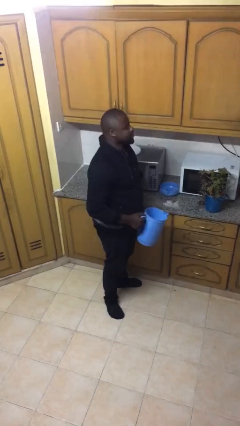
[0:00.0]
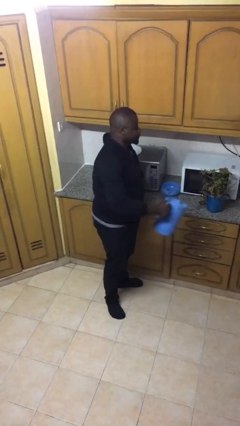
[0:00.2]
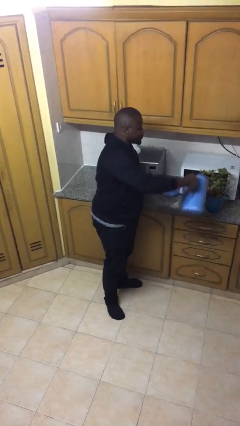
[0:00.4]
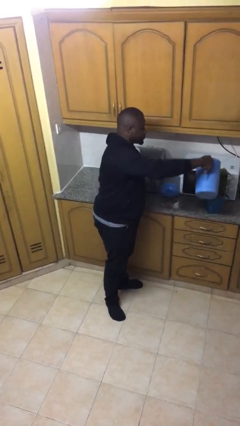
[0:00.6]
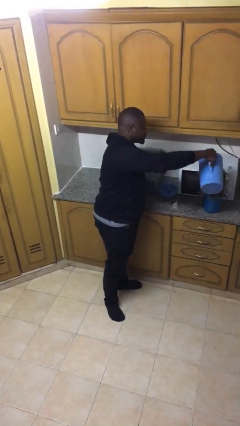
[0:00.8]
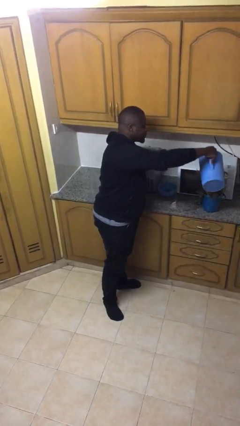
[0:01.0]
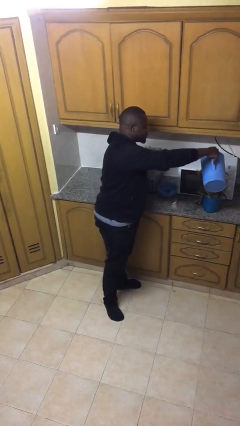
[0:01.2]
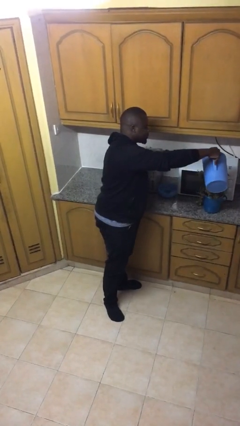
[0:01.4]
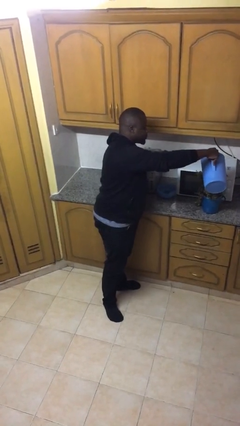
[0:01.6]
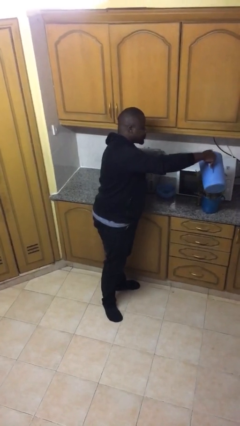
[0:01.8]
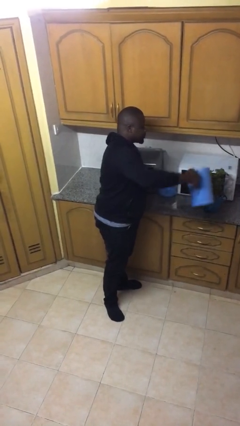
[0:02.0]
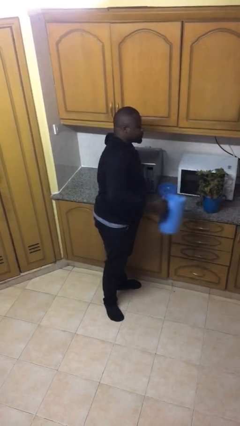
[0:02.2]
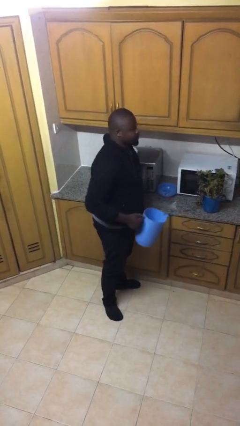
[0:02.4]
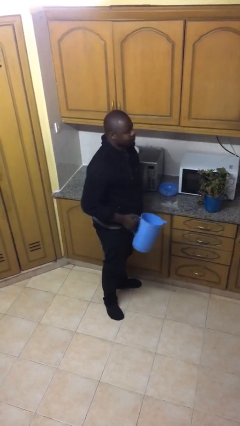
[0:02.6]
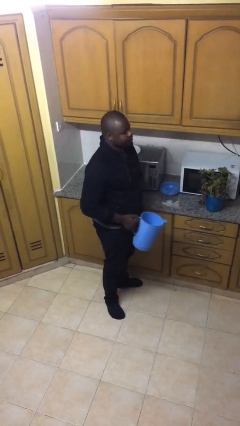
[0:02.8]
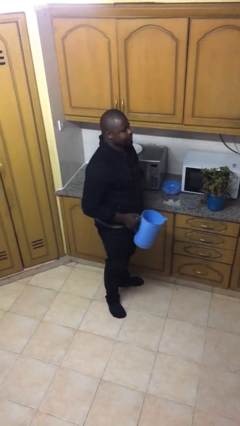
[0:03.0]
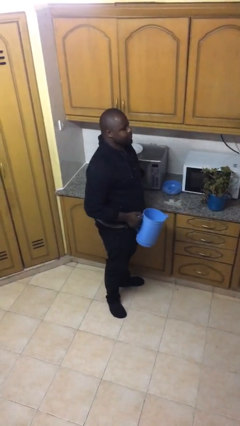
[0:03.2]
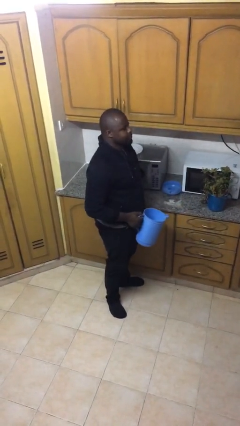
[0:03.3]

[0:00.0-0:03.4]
person waters houseplant

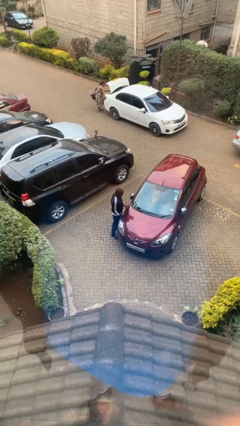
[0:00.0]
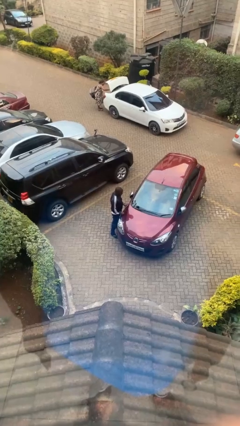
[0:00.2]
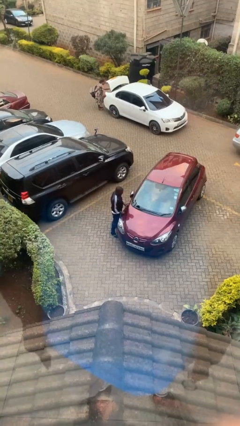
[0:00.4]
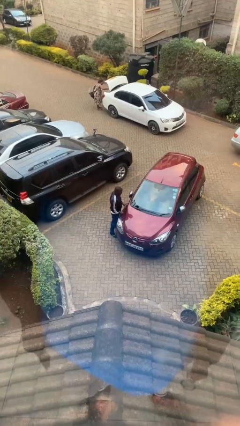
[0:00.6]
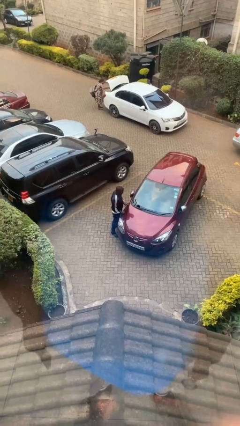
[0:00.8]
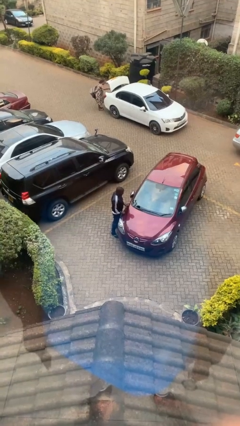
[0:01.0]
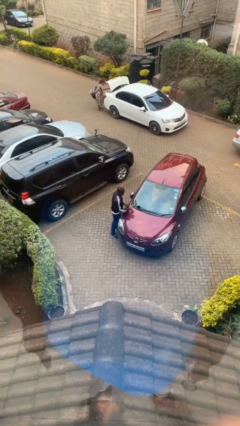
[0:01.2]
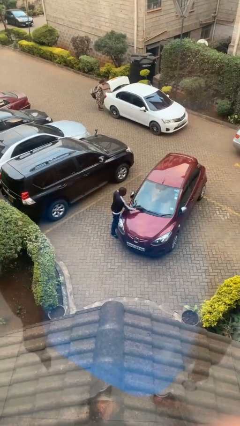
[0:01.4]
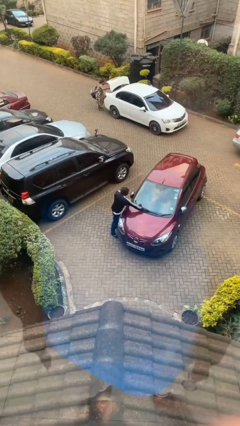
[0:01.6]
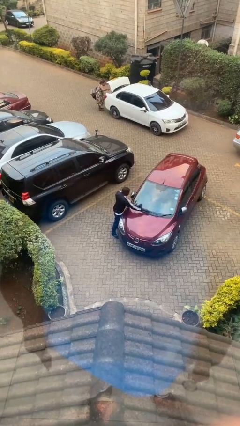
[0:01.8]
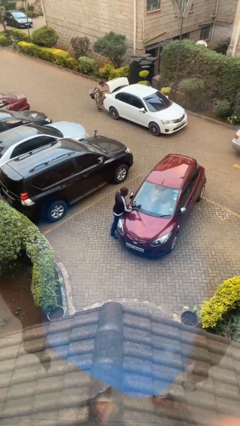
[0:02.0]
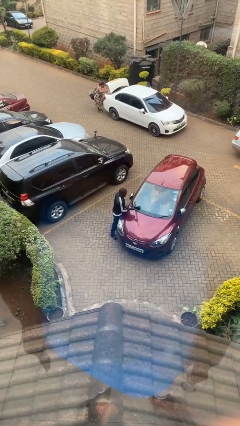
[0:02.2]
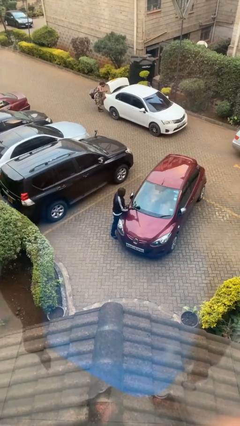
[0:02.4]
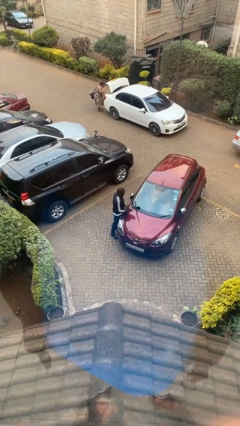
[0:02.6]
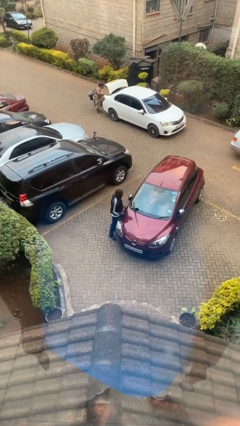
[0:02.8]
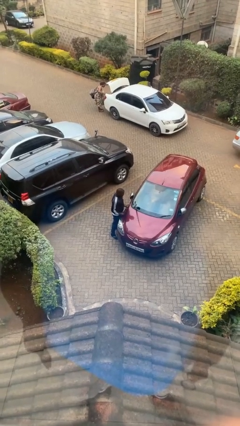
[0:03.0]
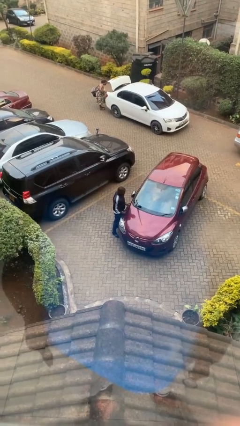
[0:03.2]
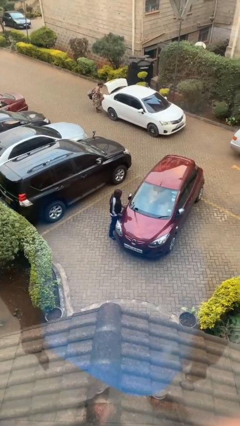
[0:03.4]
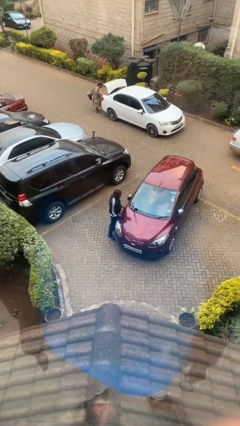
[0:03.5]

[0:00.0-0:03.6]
person flips up car wipers

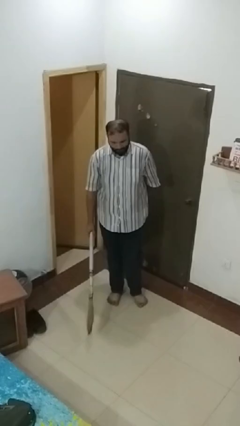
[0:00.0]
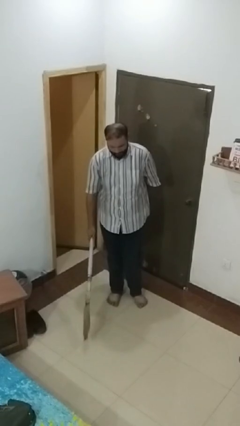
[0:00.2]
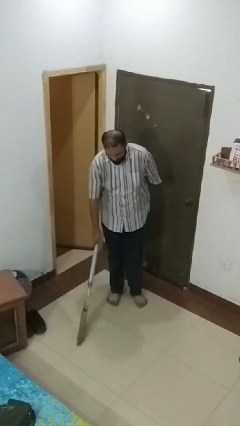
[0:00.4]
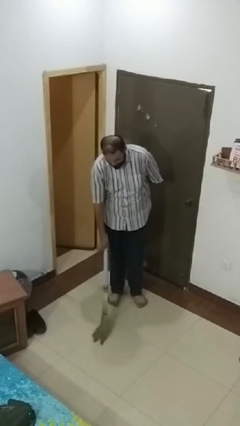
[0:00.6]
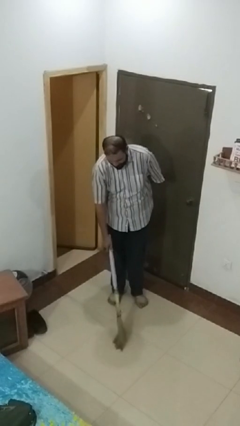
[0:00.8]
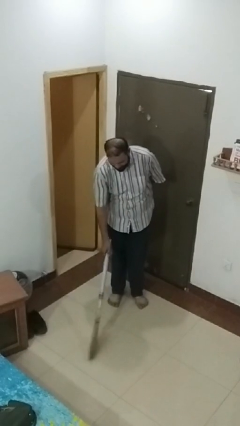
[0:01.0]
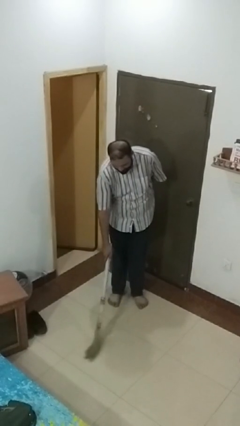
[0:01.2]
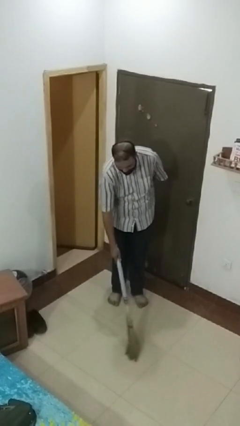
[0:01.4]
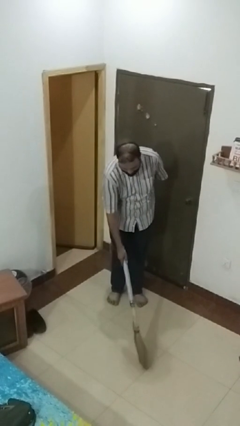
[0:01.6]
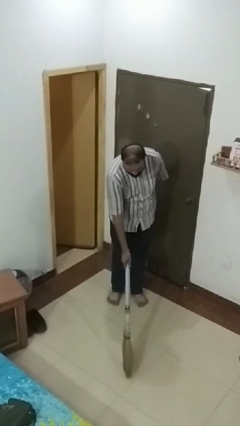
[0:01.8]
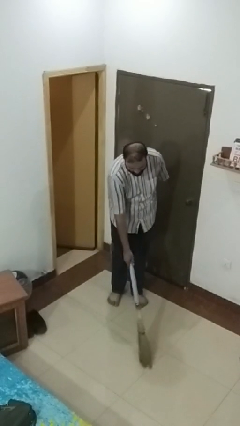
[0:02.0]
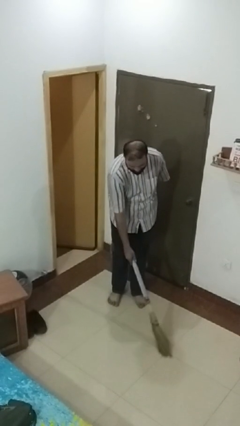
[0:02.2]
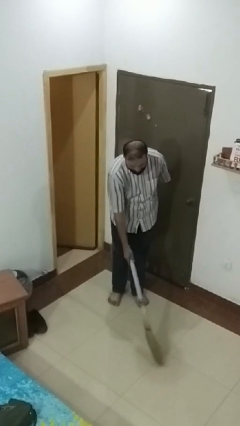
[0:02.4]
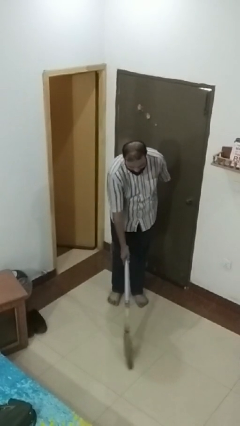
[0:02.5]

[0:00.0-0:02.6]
person sweeps floor

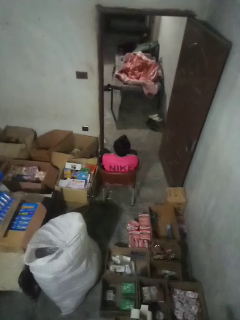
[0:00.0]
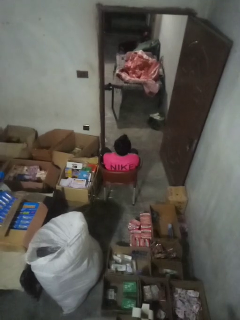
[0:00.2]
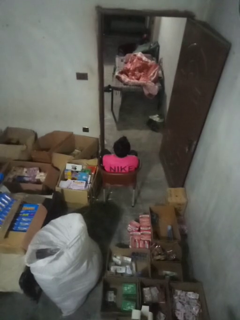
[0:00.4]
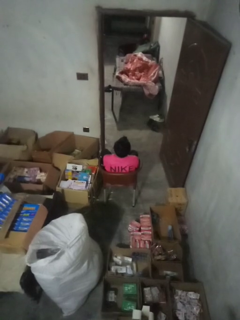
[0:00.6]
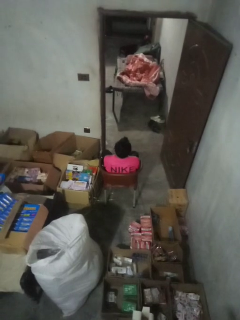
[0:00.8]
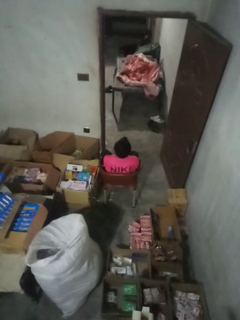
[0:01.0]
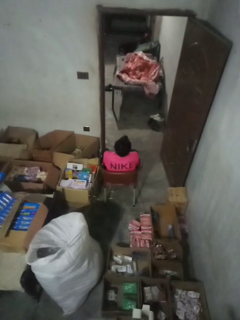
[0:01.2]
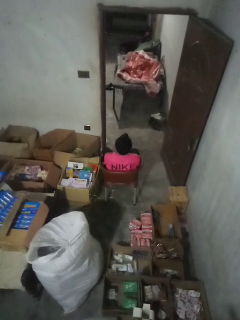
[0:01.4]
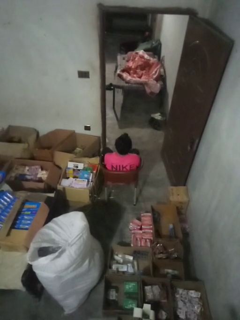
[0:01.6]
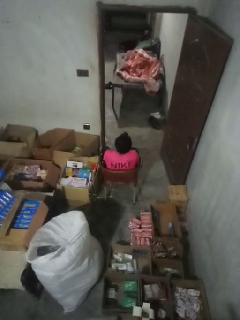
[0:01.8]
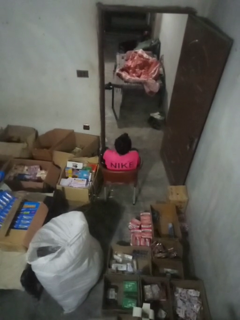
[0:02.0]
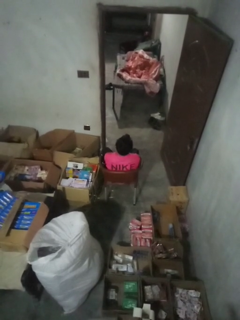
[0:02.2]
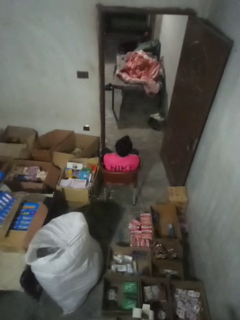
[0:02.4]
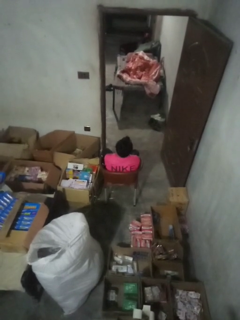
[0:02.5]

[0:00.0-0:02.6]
person shrugs

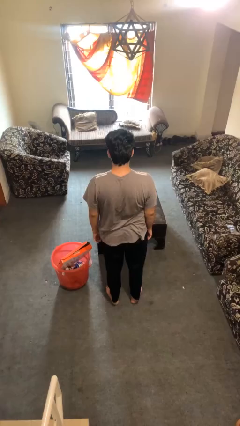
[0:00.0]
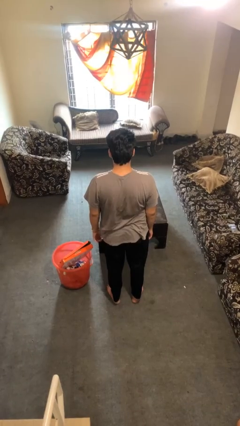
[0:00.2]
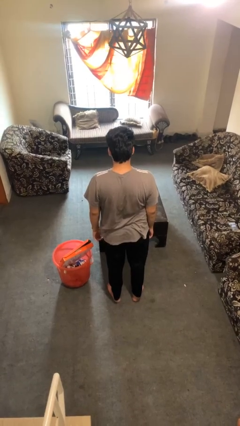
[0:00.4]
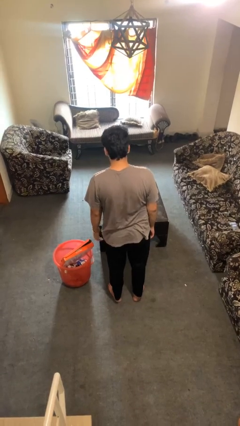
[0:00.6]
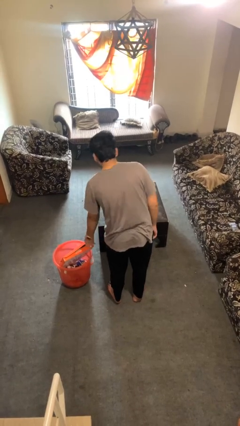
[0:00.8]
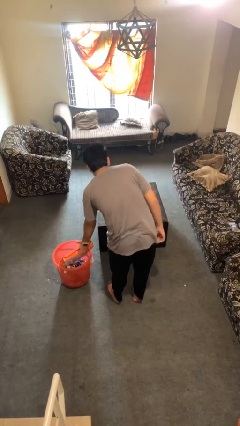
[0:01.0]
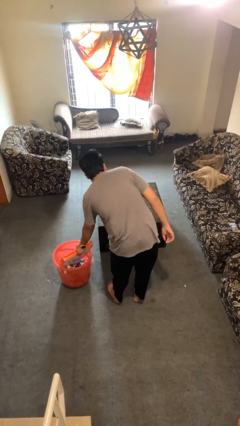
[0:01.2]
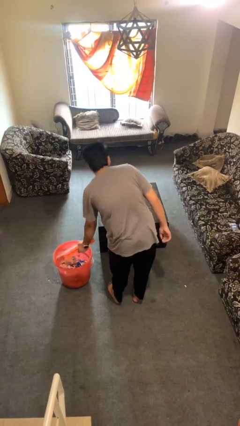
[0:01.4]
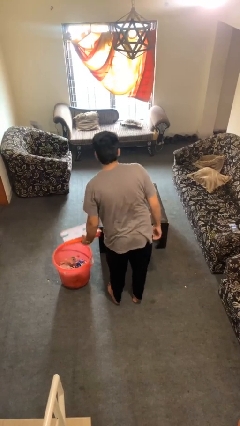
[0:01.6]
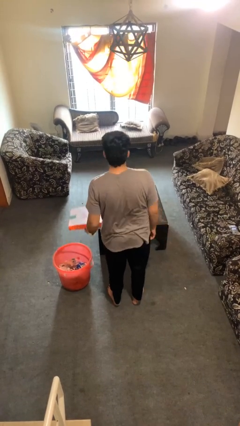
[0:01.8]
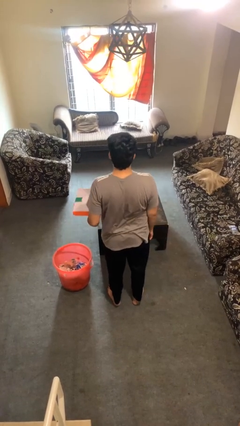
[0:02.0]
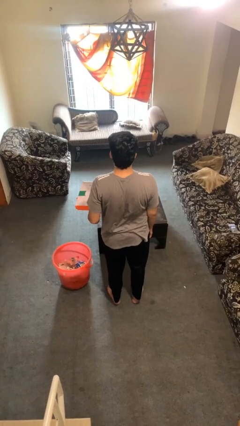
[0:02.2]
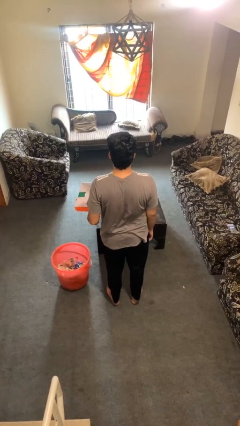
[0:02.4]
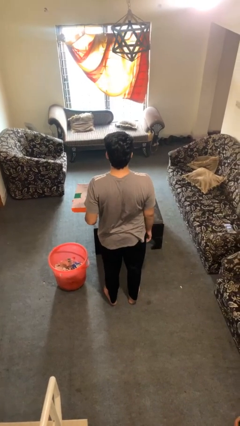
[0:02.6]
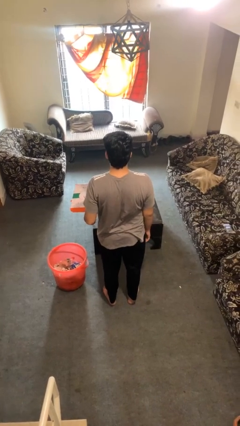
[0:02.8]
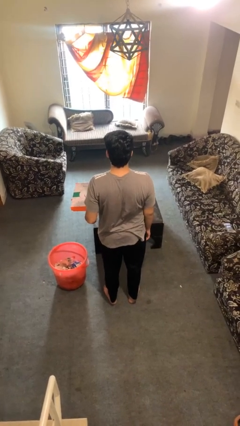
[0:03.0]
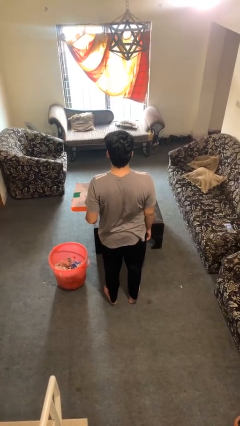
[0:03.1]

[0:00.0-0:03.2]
person takes object from basket

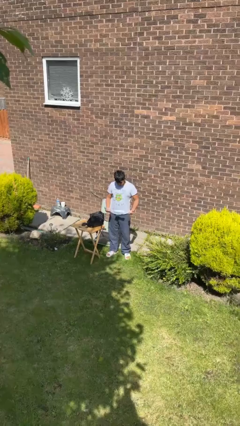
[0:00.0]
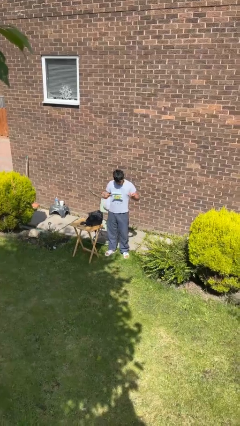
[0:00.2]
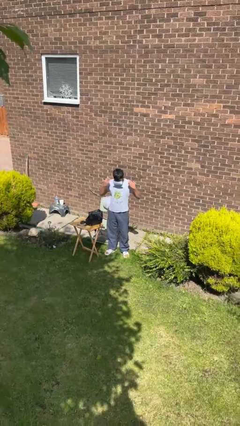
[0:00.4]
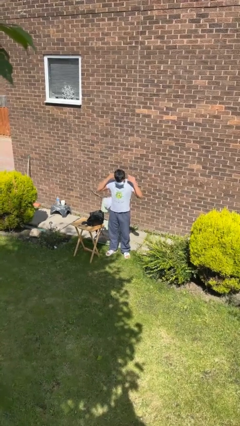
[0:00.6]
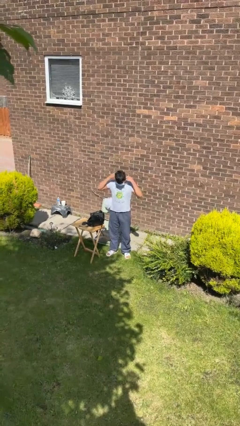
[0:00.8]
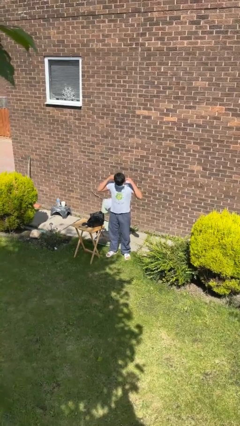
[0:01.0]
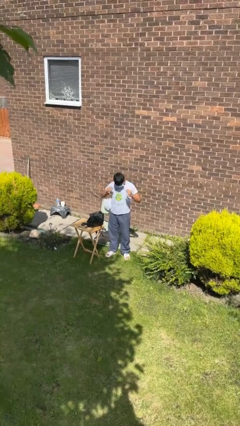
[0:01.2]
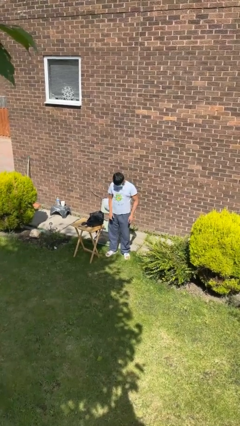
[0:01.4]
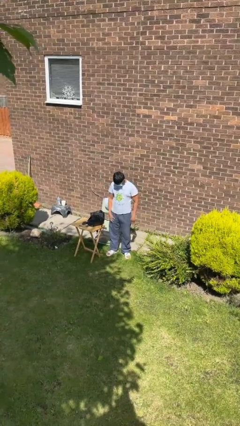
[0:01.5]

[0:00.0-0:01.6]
person puts on facemask

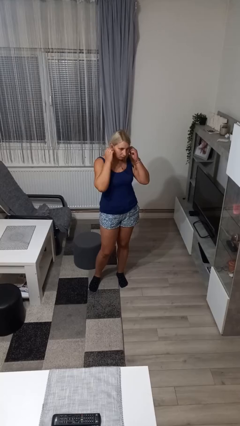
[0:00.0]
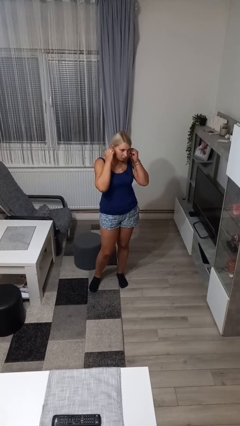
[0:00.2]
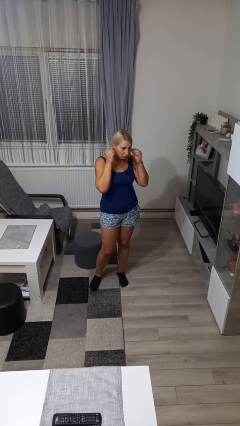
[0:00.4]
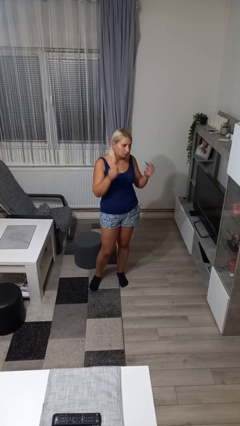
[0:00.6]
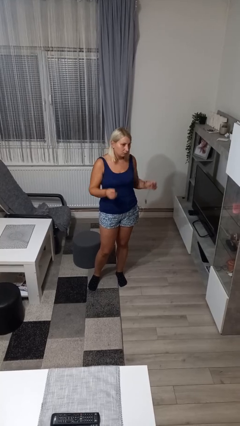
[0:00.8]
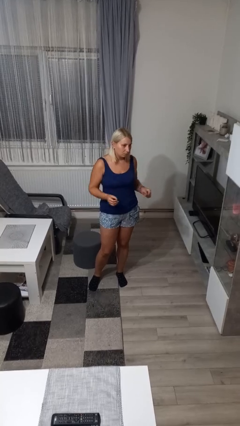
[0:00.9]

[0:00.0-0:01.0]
person takes off headphones
